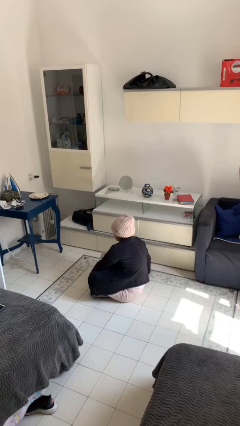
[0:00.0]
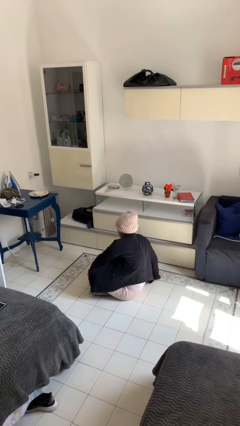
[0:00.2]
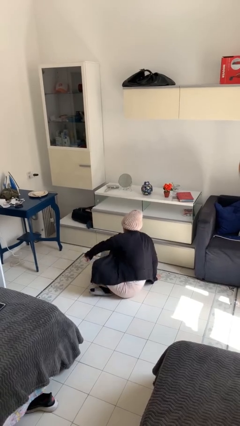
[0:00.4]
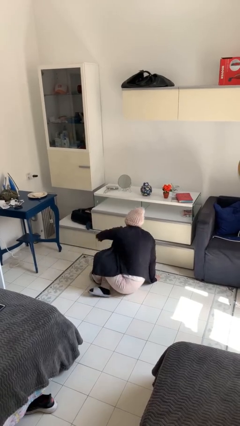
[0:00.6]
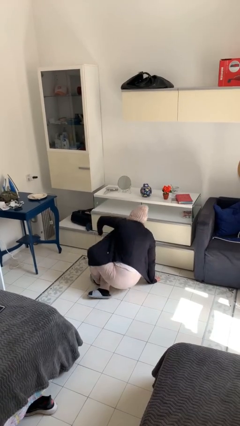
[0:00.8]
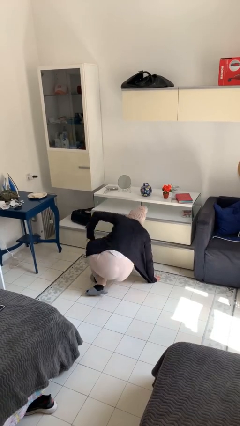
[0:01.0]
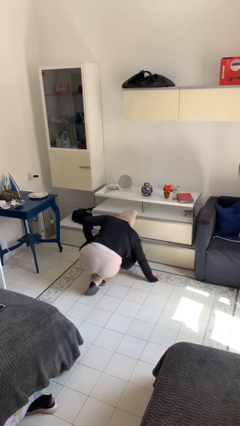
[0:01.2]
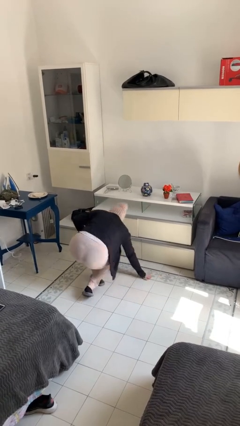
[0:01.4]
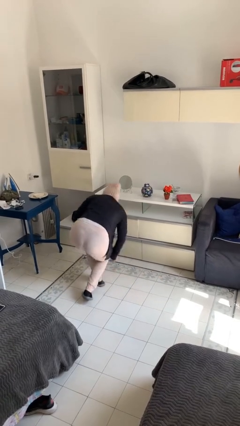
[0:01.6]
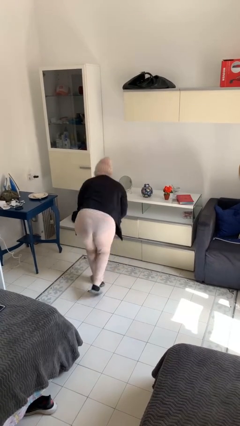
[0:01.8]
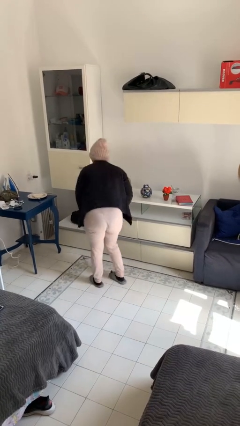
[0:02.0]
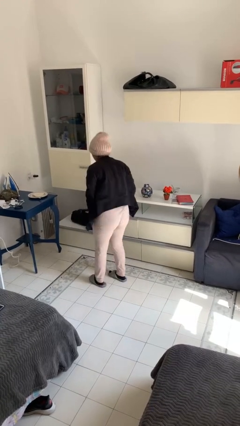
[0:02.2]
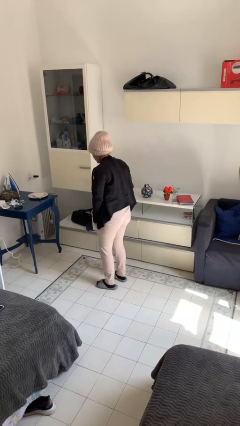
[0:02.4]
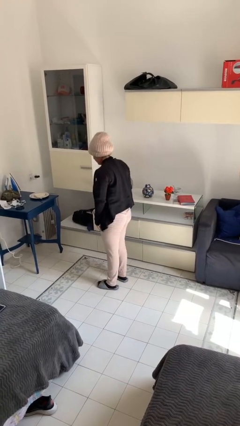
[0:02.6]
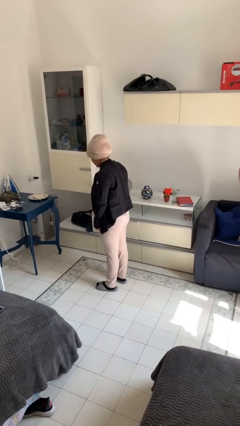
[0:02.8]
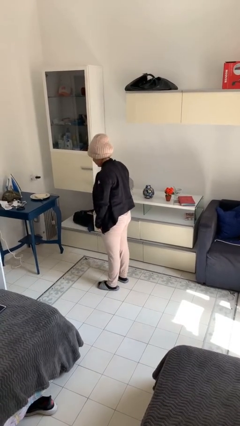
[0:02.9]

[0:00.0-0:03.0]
person stands up from floor

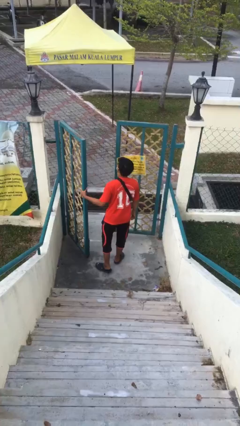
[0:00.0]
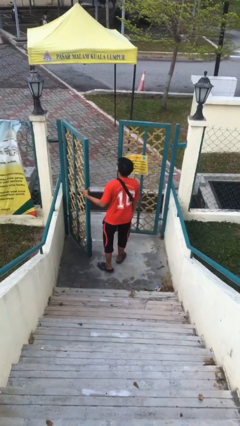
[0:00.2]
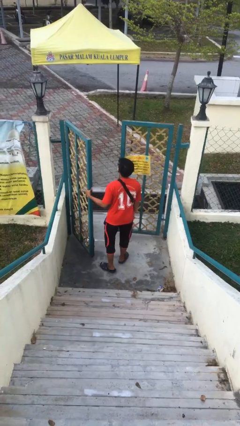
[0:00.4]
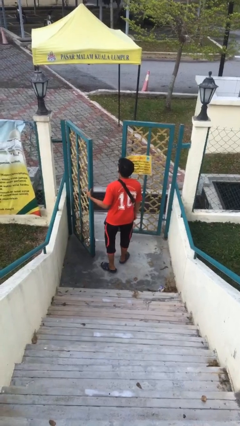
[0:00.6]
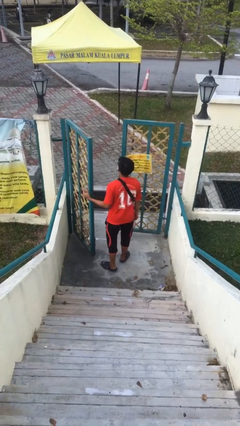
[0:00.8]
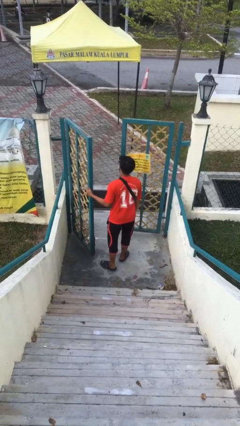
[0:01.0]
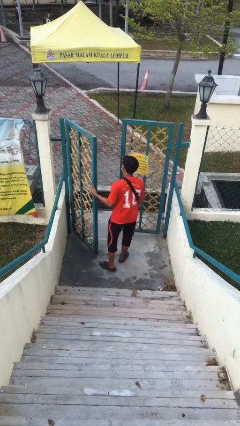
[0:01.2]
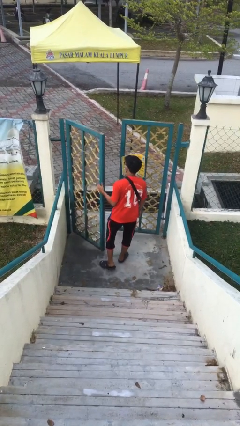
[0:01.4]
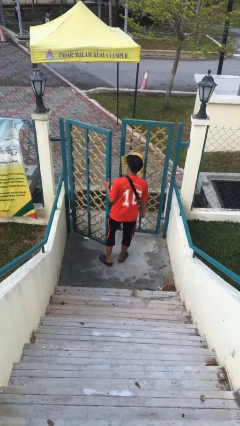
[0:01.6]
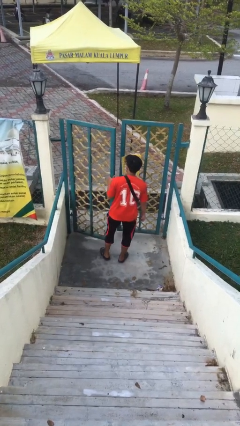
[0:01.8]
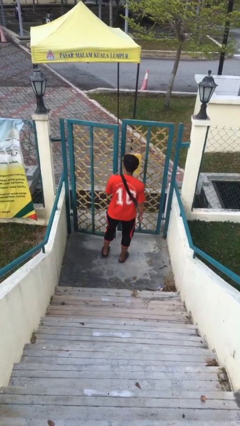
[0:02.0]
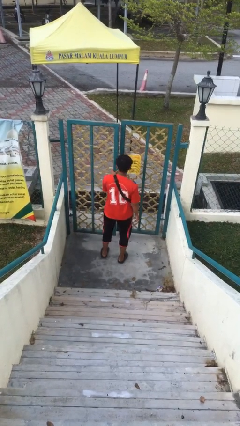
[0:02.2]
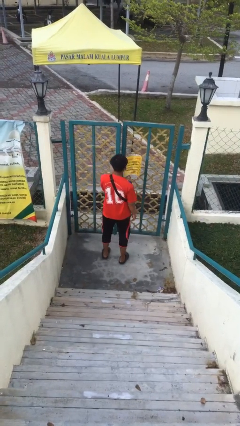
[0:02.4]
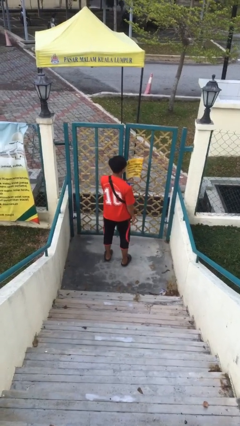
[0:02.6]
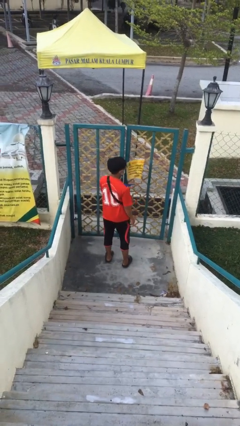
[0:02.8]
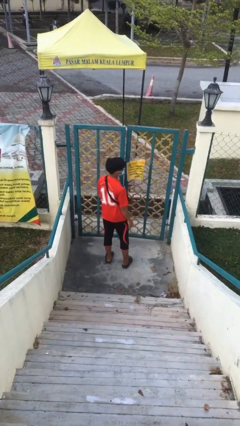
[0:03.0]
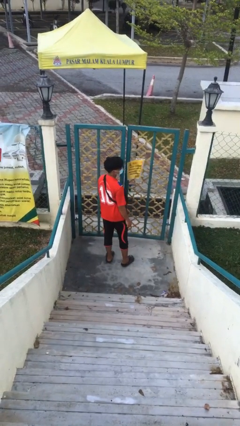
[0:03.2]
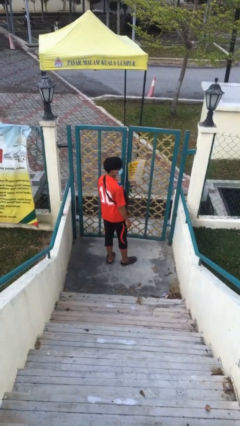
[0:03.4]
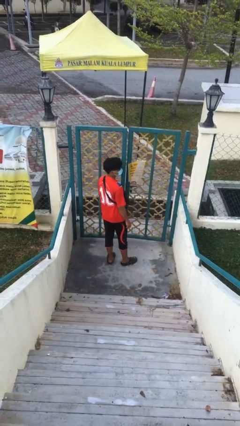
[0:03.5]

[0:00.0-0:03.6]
person closes facility door

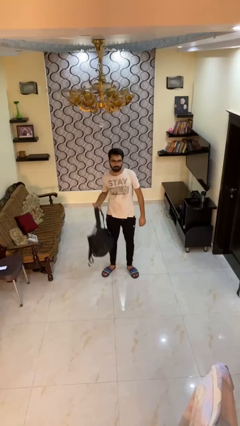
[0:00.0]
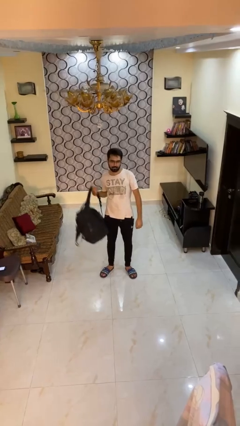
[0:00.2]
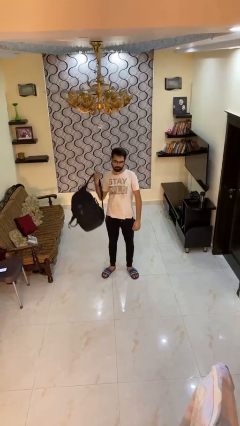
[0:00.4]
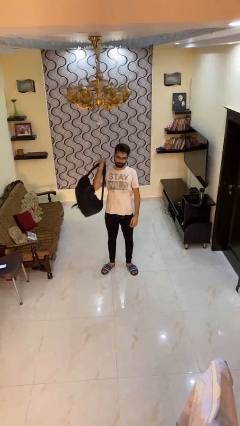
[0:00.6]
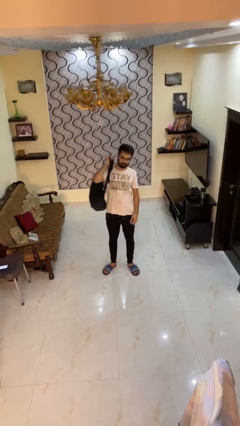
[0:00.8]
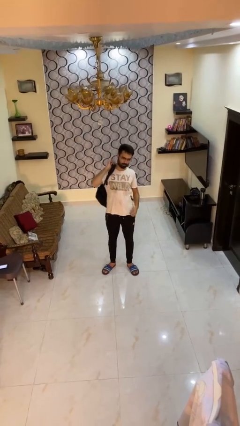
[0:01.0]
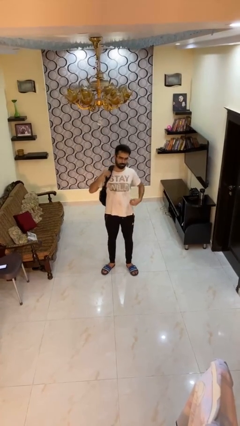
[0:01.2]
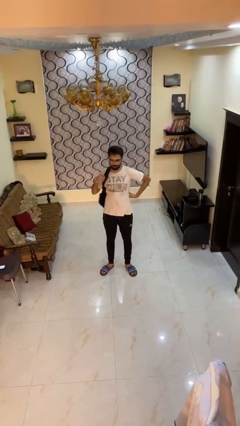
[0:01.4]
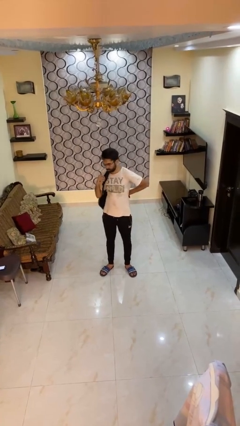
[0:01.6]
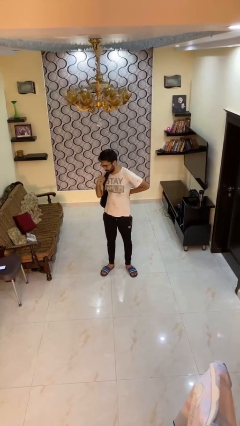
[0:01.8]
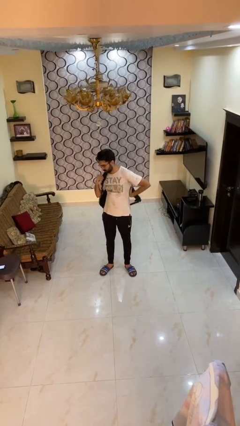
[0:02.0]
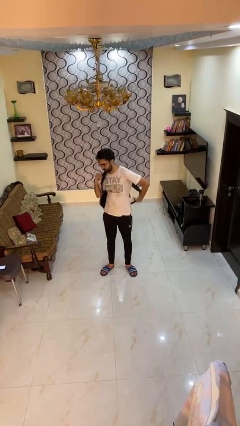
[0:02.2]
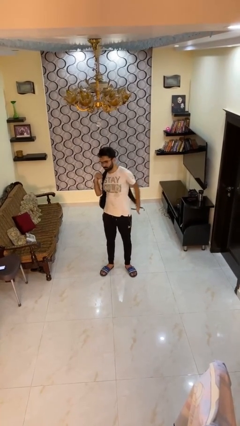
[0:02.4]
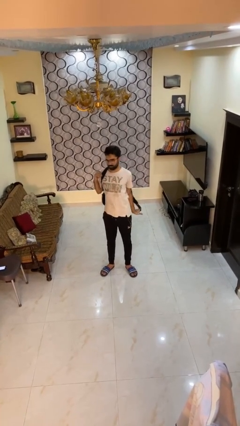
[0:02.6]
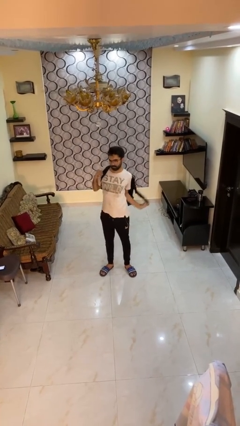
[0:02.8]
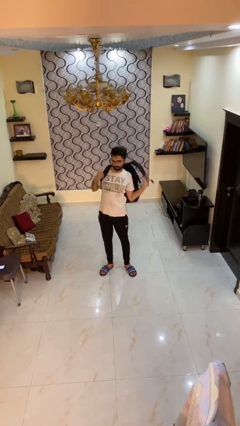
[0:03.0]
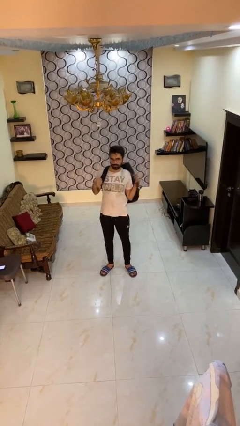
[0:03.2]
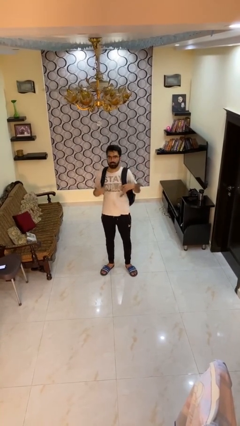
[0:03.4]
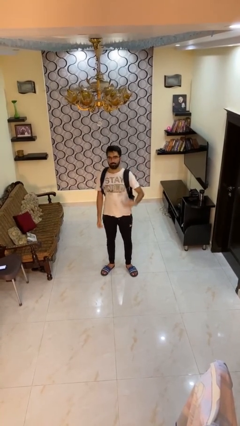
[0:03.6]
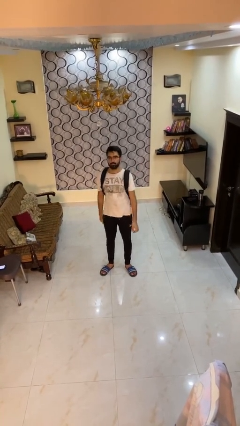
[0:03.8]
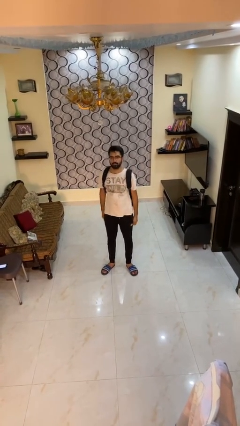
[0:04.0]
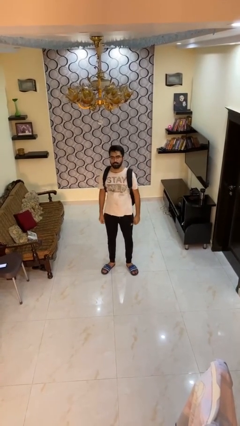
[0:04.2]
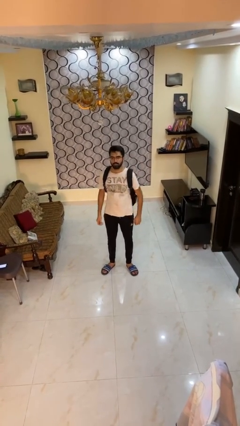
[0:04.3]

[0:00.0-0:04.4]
person puts on backpack

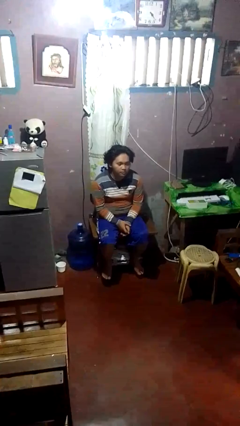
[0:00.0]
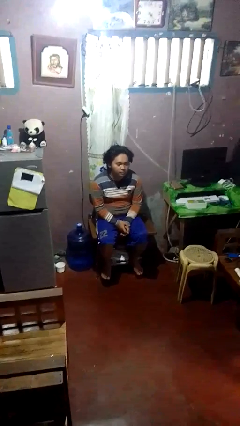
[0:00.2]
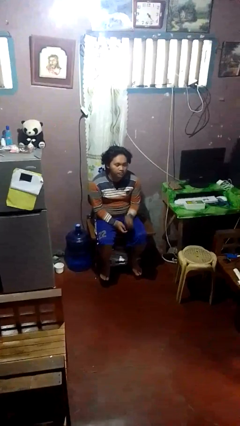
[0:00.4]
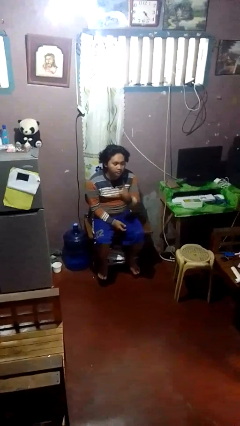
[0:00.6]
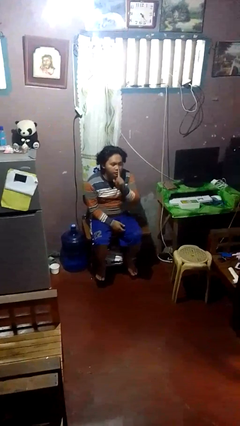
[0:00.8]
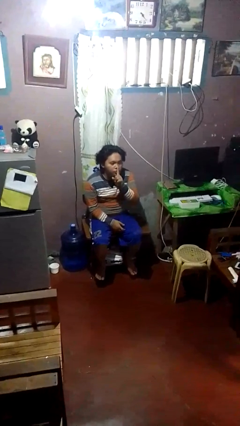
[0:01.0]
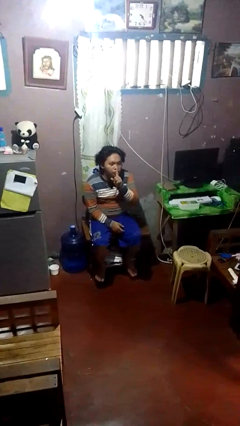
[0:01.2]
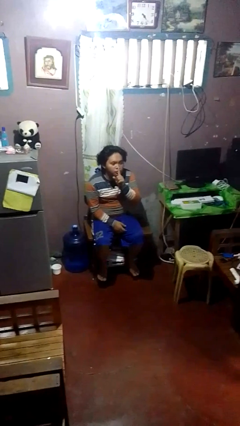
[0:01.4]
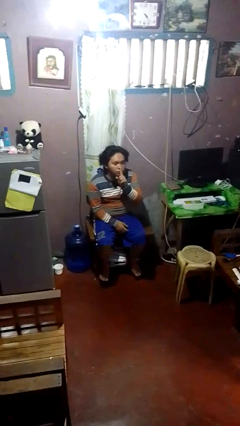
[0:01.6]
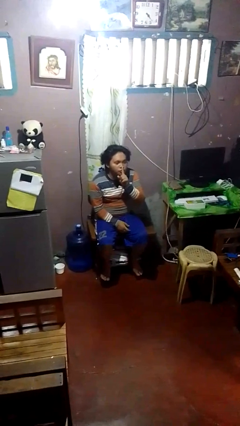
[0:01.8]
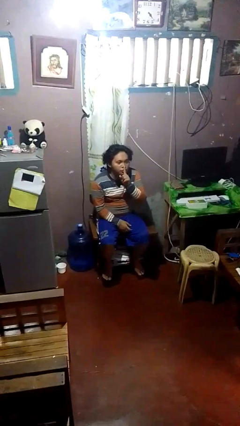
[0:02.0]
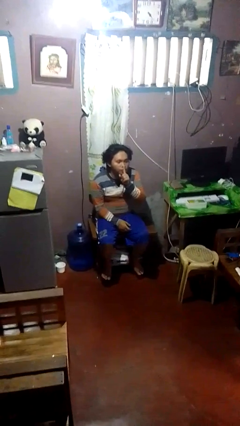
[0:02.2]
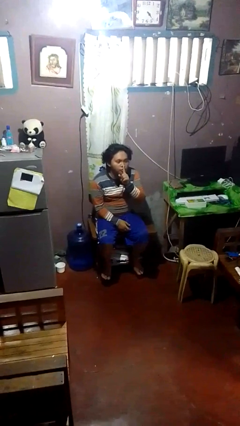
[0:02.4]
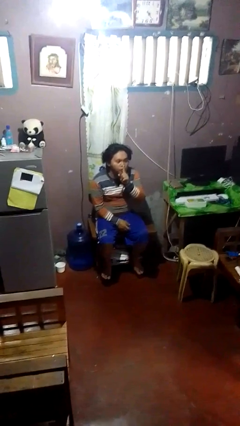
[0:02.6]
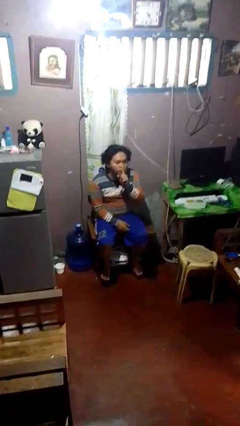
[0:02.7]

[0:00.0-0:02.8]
person gestures be quiet

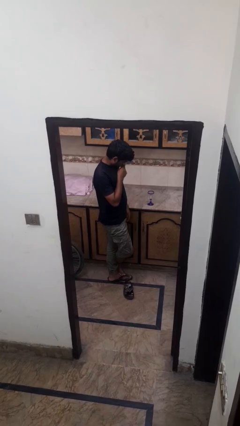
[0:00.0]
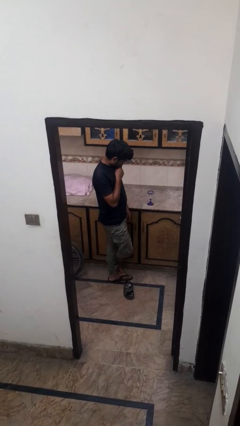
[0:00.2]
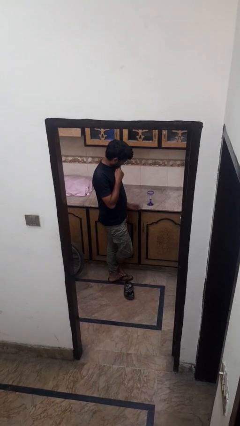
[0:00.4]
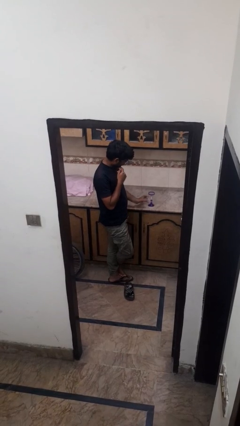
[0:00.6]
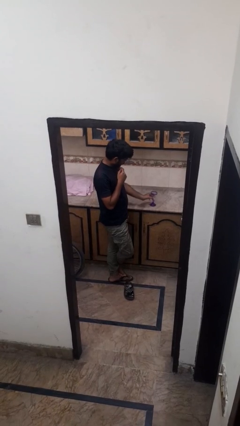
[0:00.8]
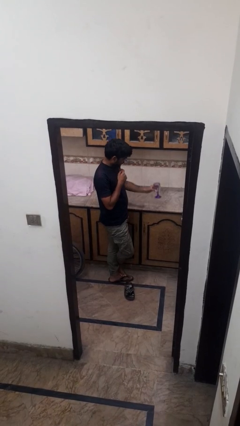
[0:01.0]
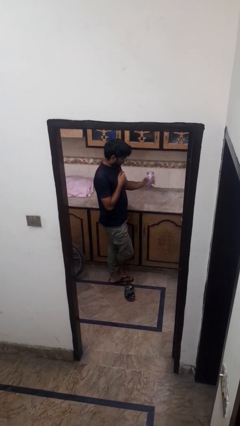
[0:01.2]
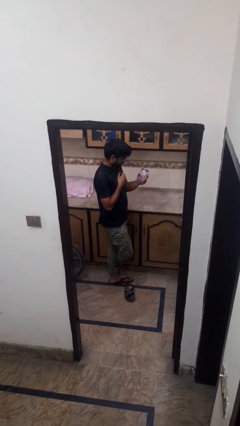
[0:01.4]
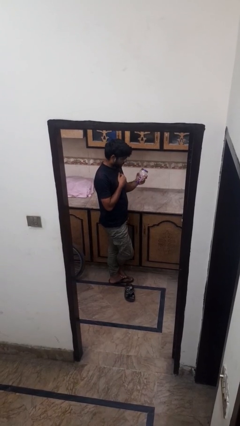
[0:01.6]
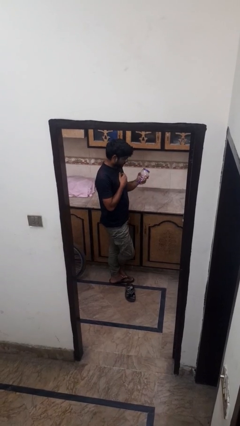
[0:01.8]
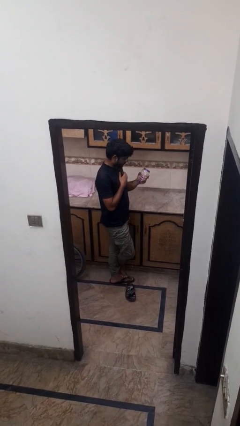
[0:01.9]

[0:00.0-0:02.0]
person picks up object from countertop

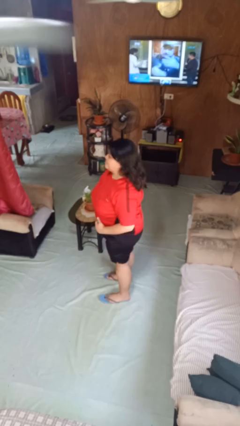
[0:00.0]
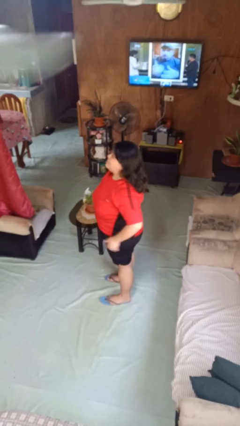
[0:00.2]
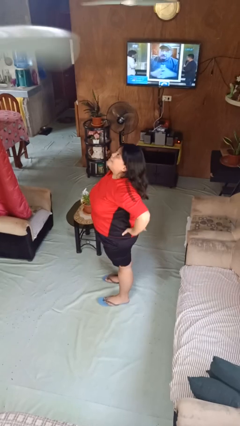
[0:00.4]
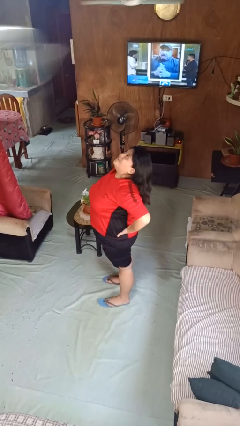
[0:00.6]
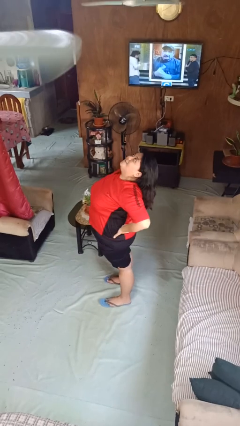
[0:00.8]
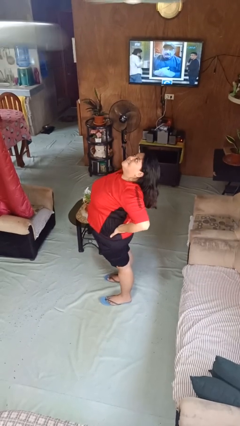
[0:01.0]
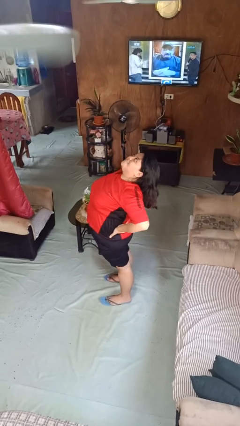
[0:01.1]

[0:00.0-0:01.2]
person stretches back
